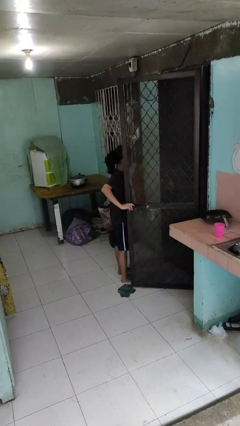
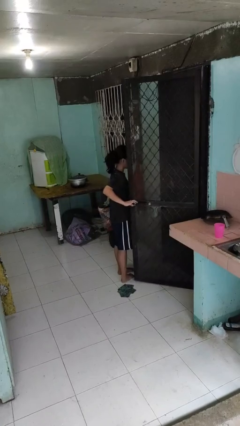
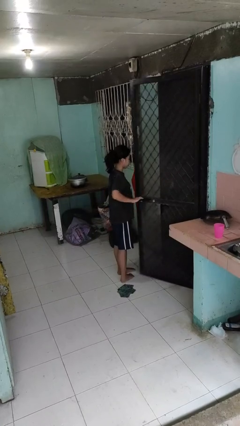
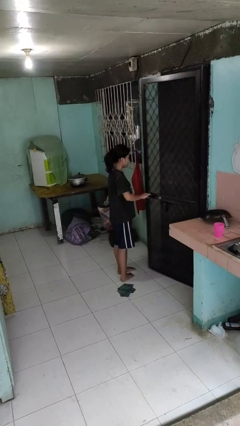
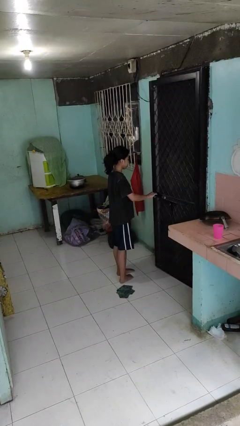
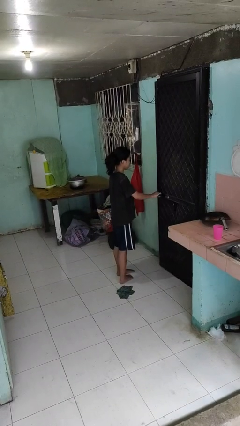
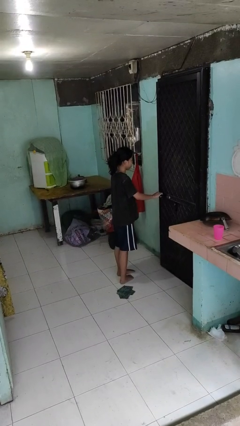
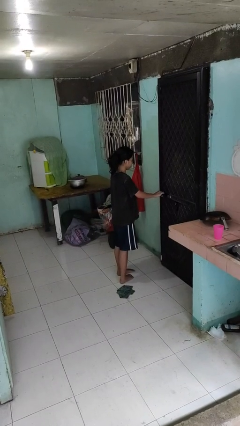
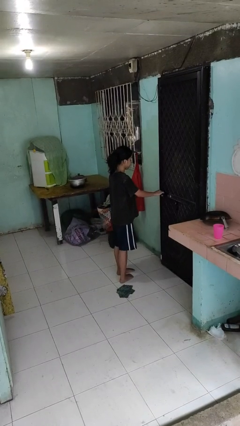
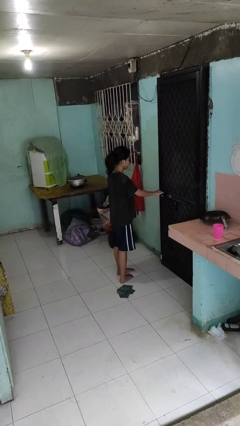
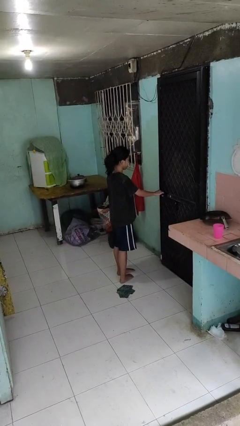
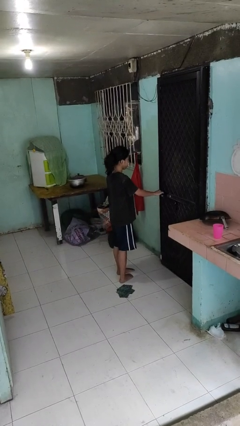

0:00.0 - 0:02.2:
person closes facility door

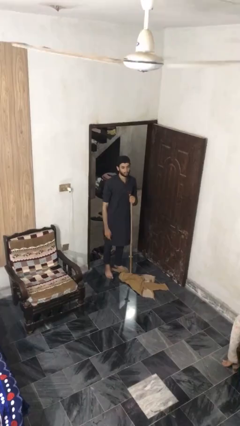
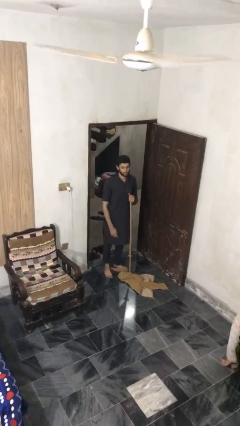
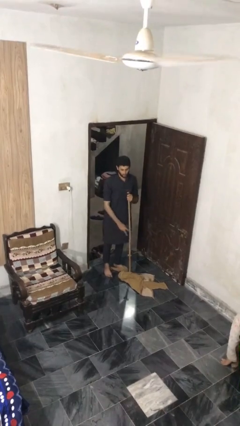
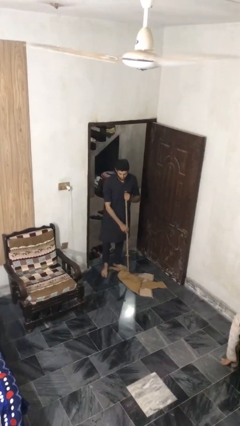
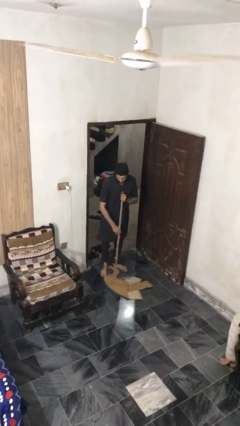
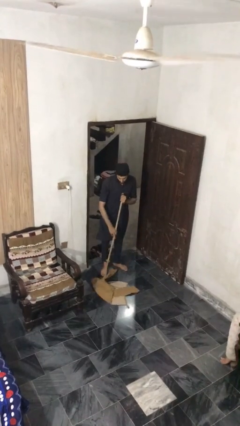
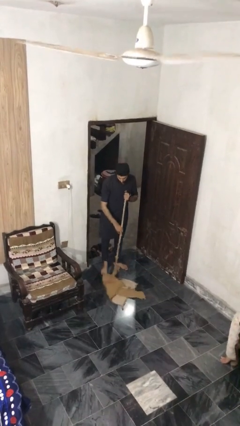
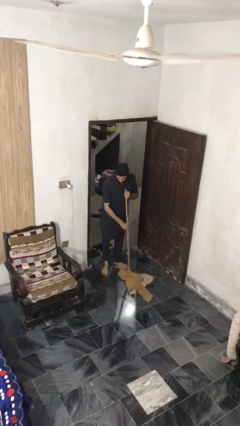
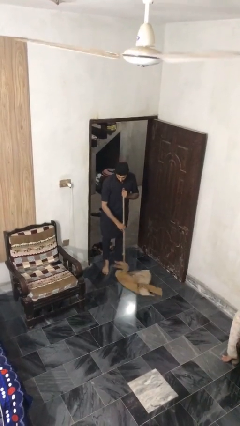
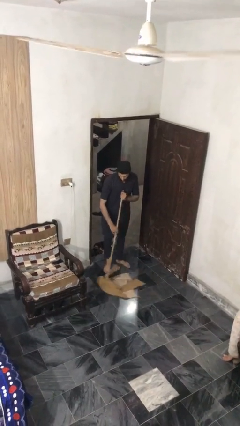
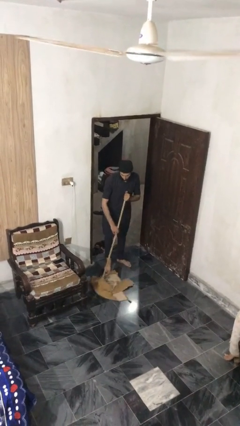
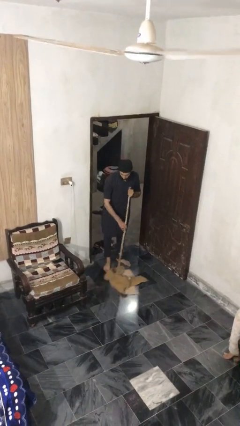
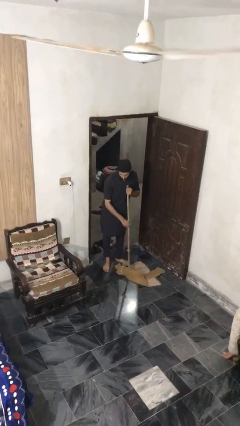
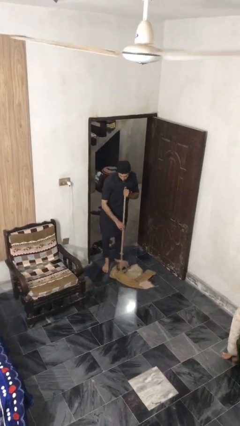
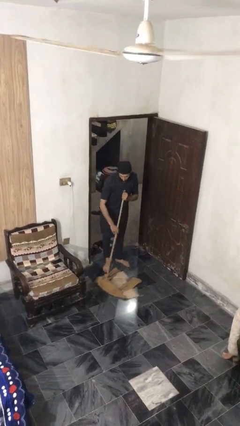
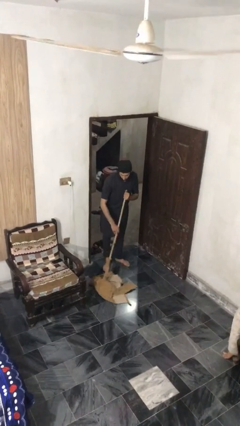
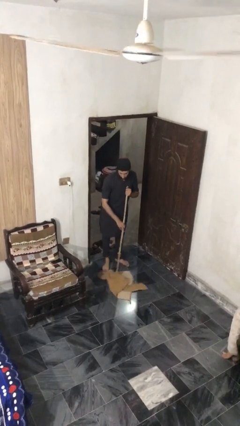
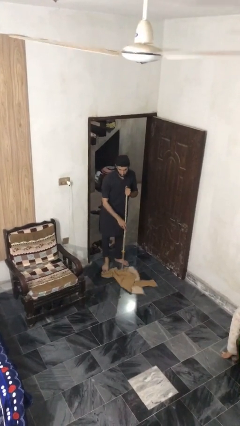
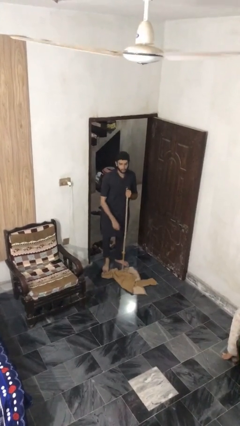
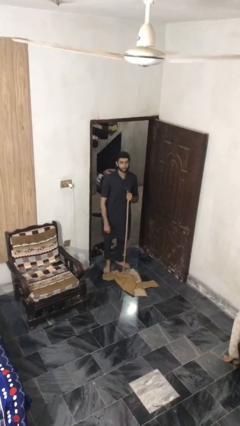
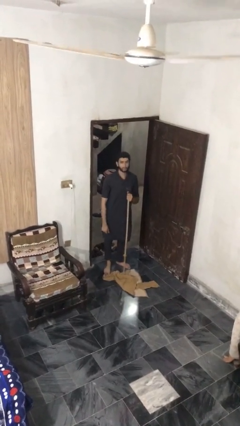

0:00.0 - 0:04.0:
person mops

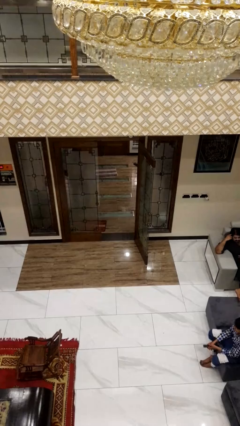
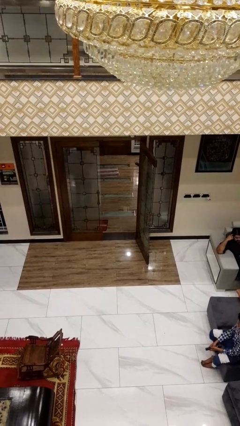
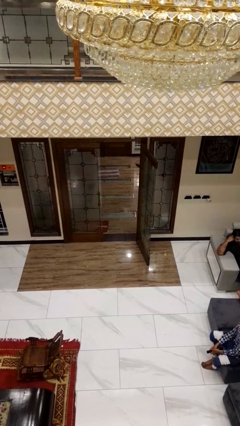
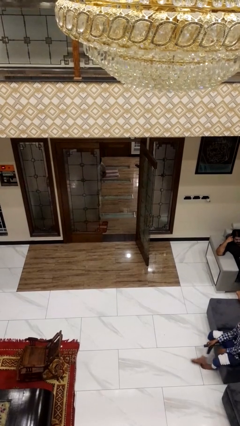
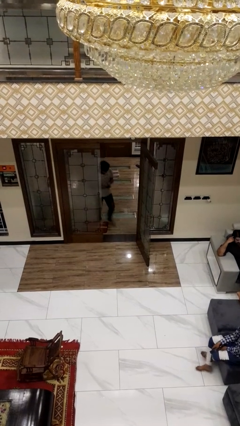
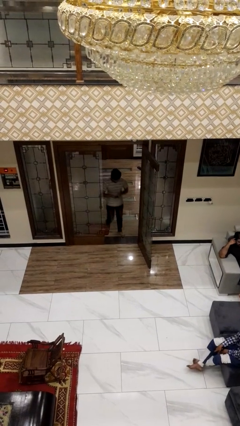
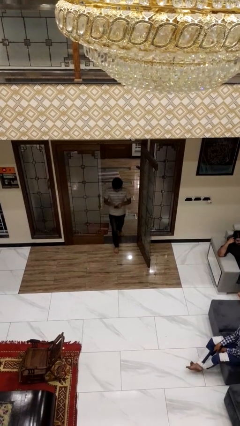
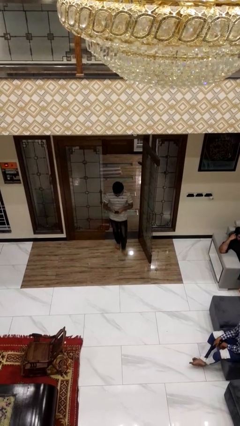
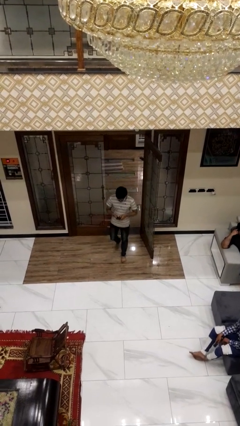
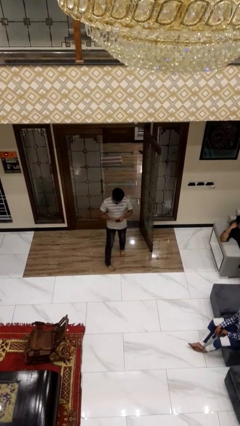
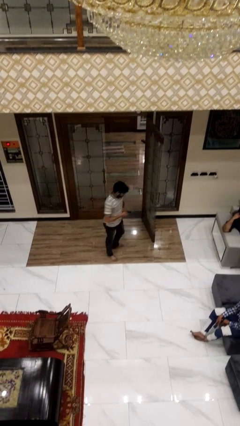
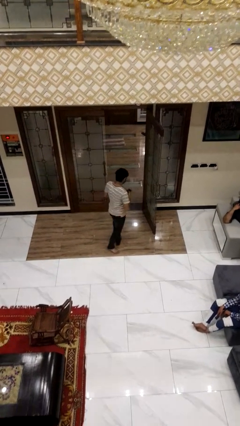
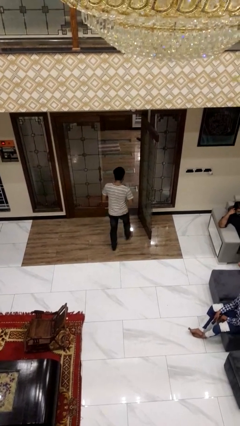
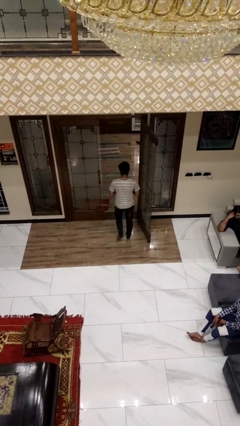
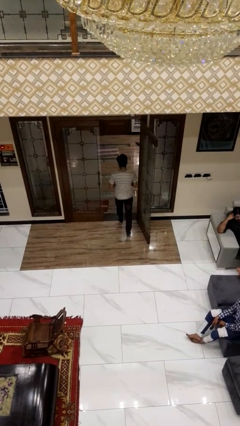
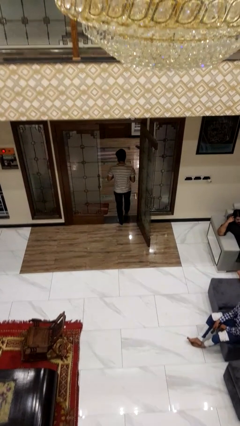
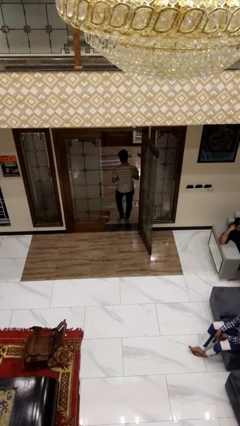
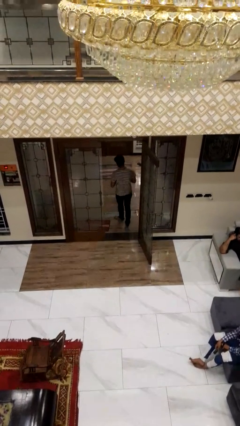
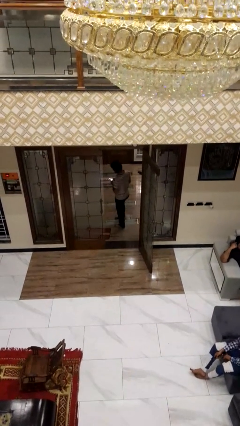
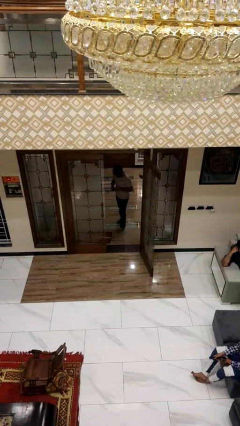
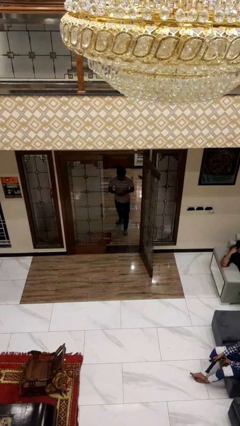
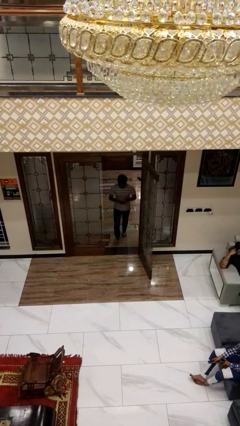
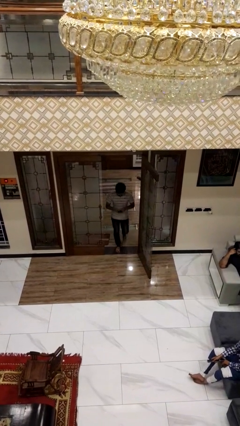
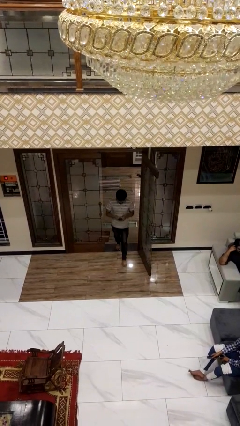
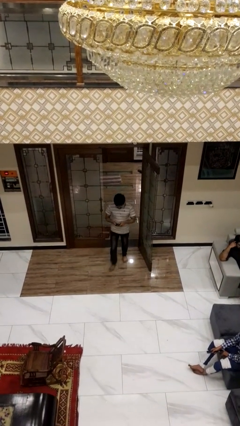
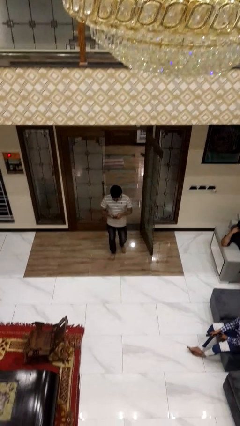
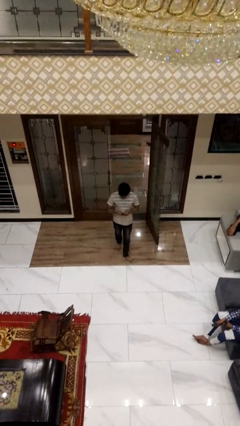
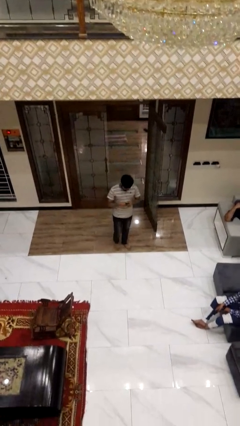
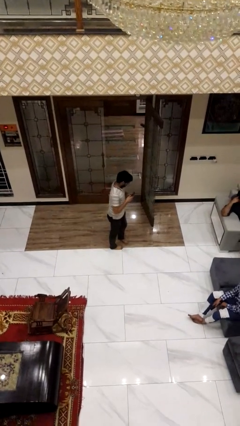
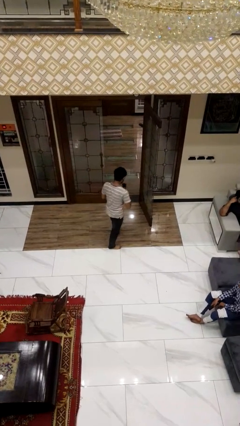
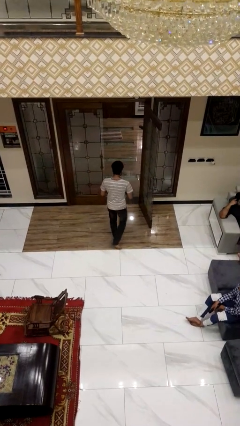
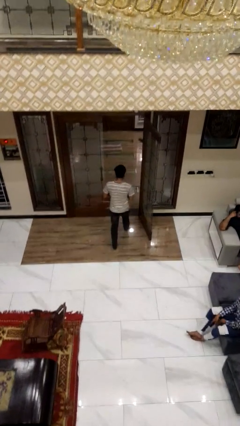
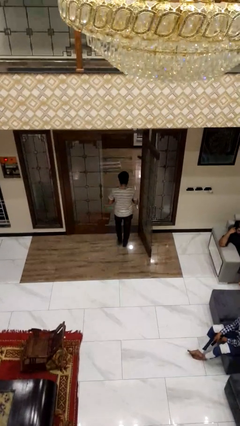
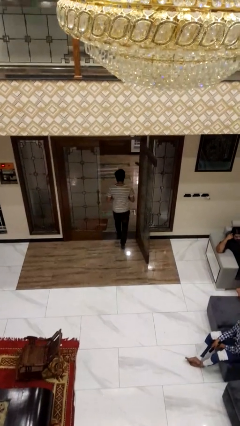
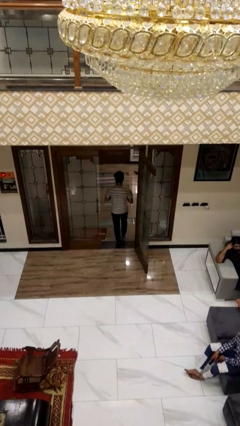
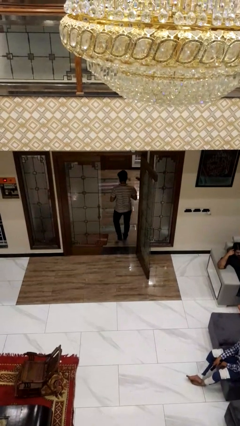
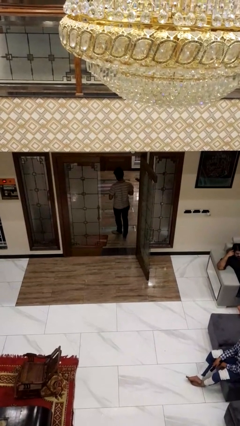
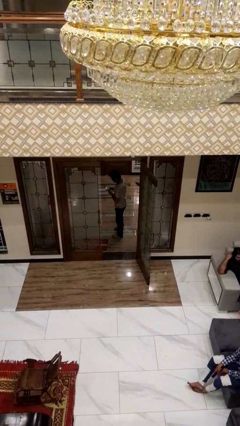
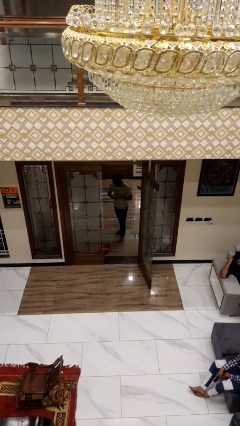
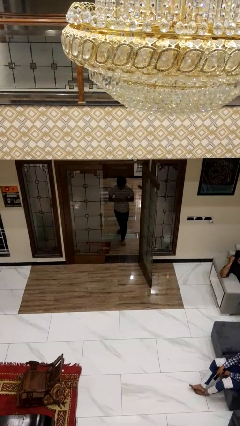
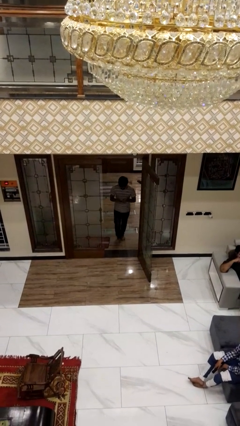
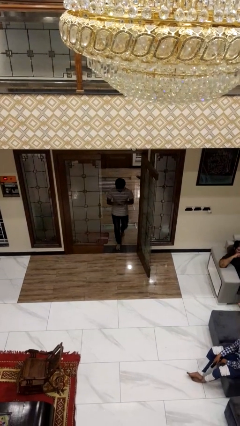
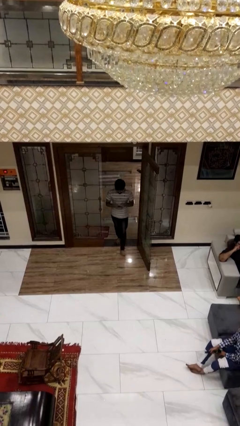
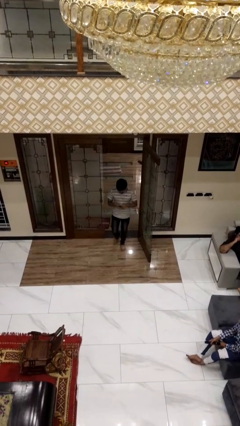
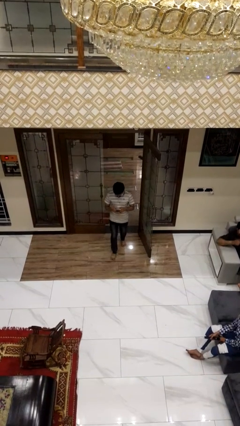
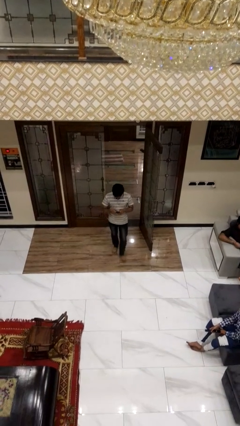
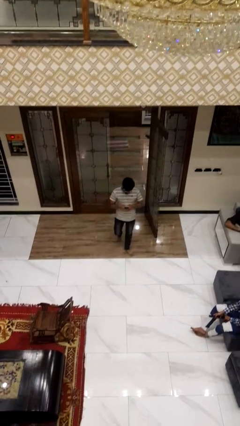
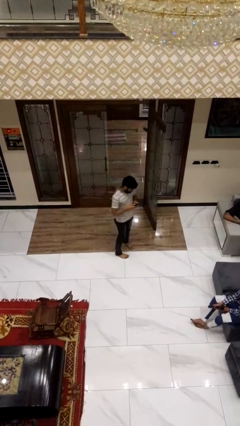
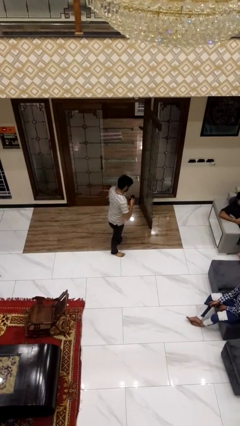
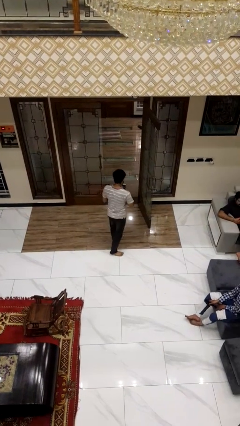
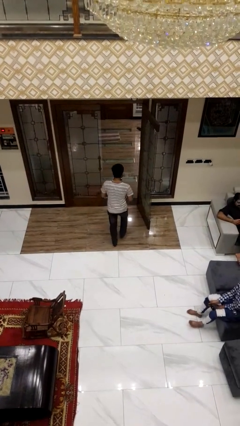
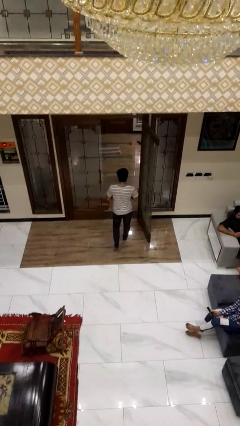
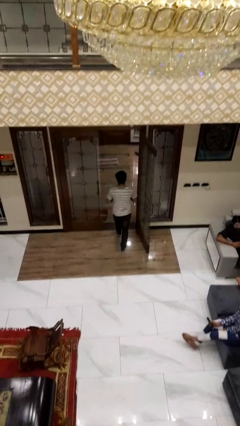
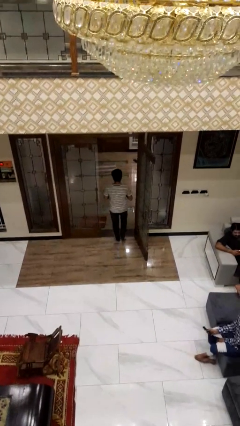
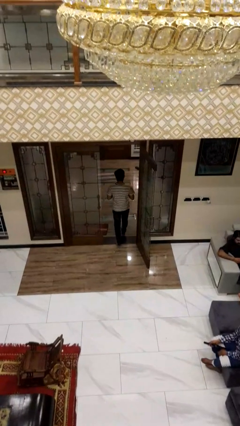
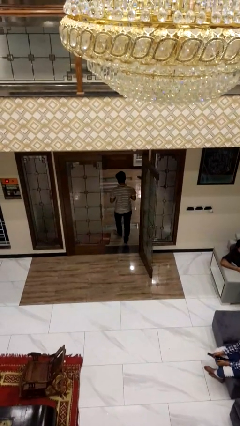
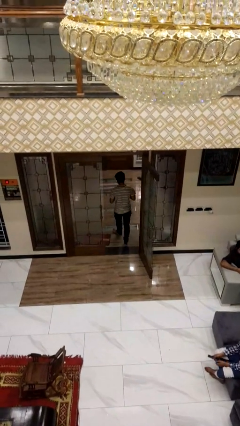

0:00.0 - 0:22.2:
person texts on phone

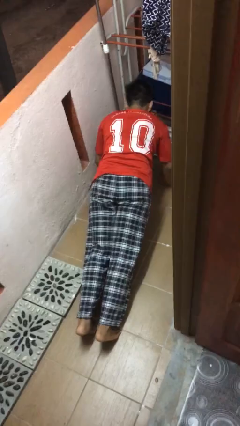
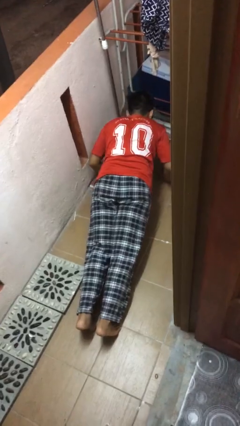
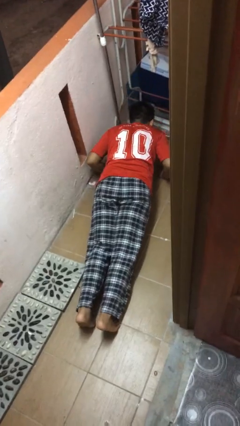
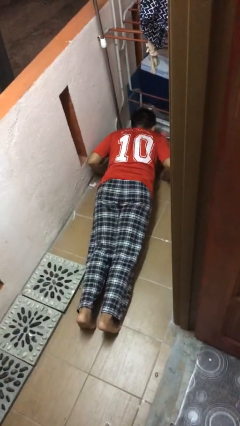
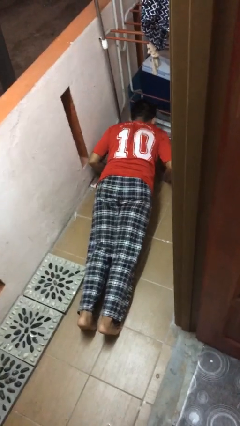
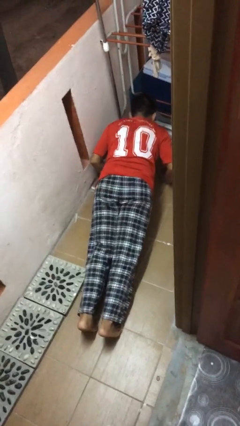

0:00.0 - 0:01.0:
person exercises with pushup
